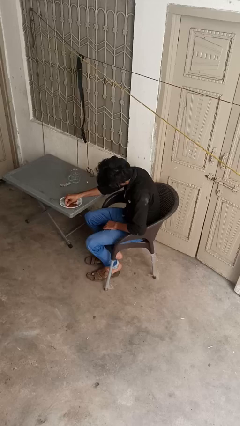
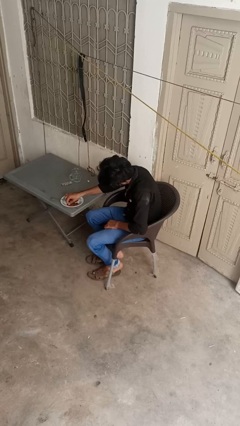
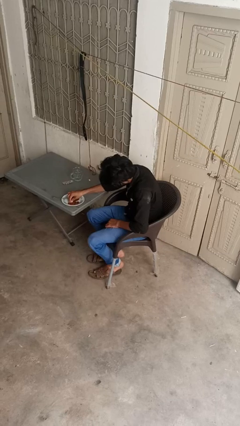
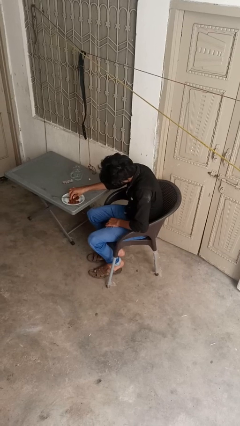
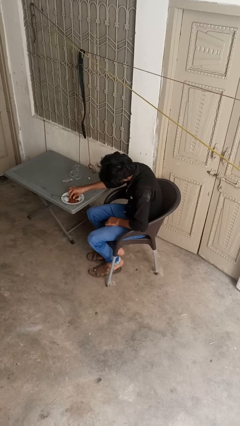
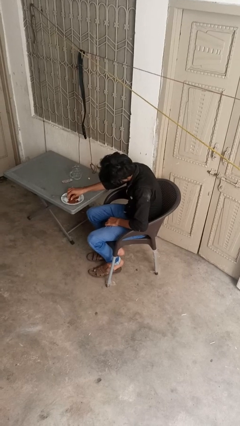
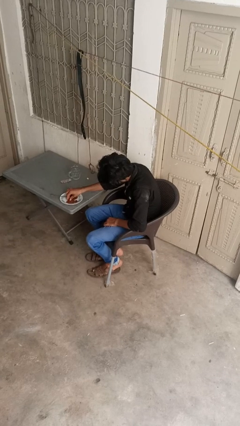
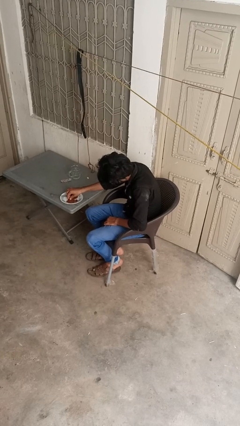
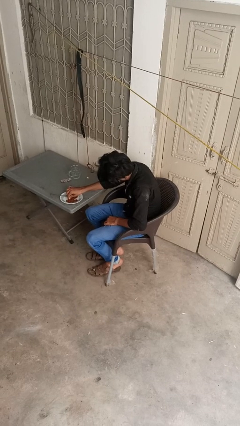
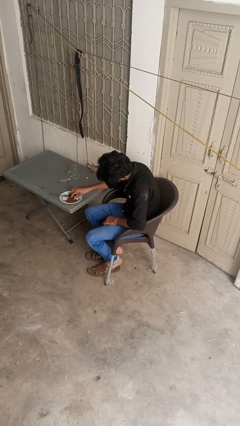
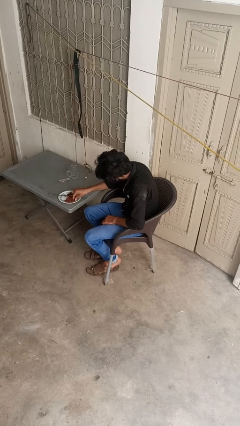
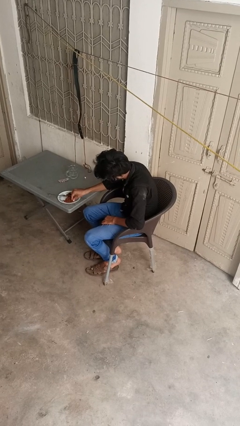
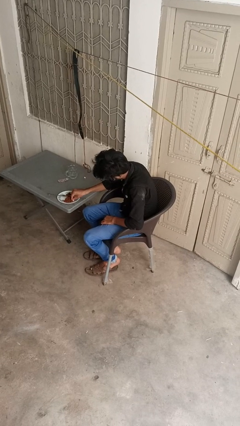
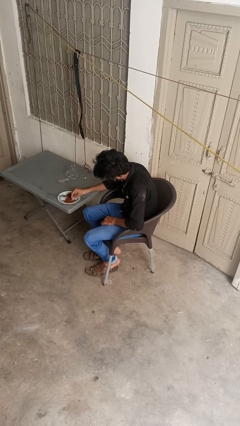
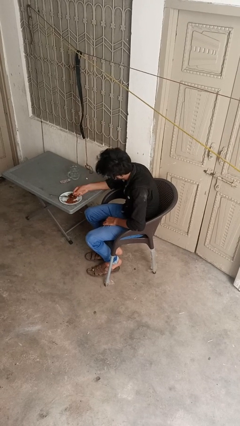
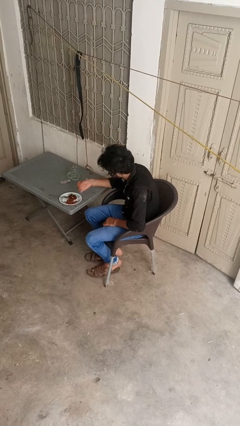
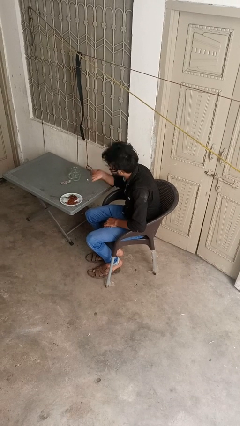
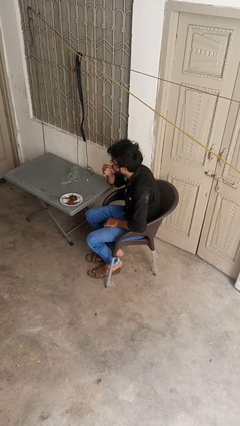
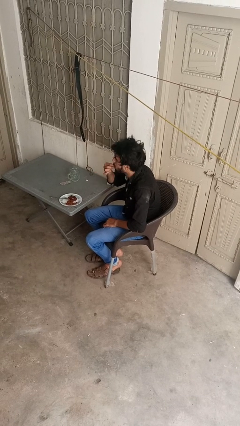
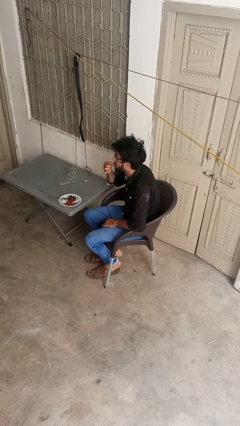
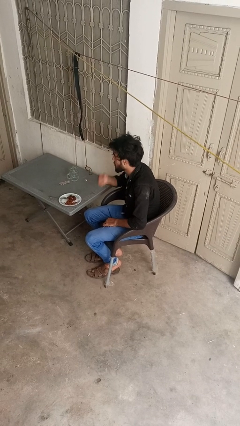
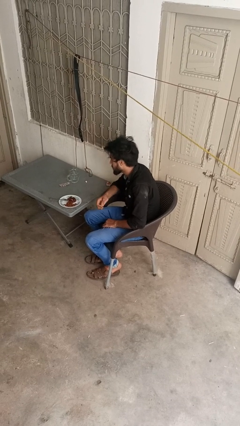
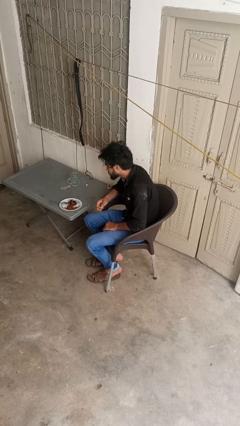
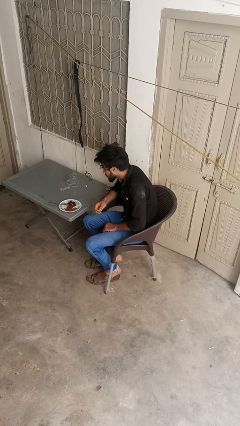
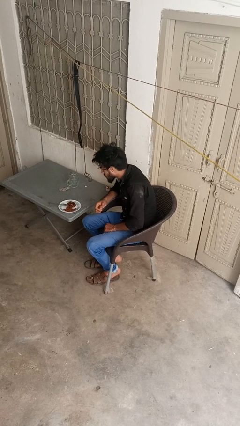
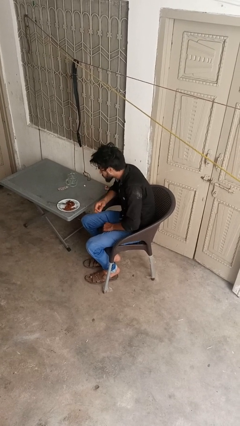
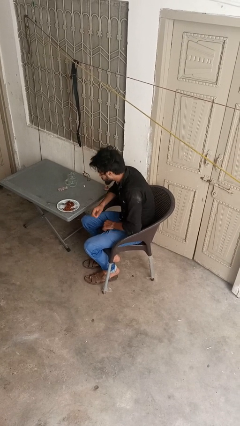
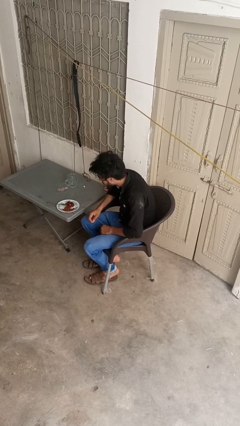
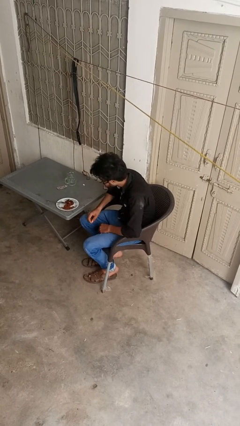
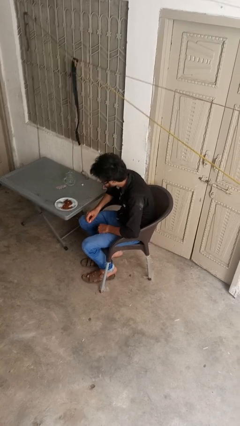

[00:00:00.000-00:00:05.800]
person eats with hands

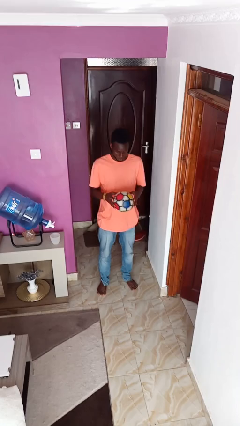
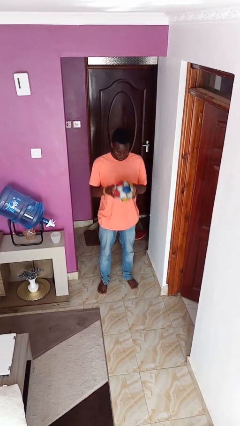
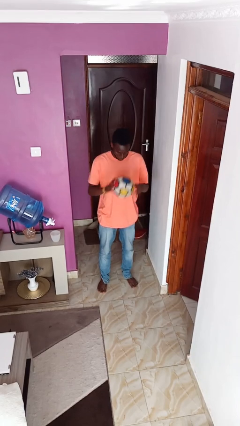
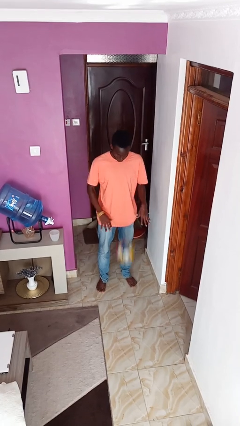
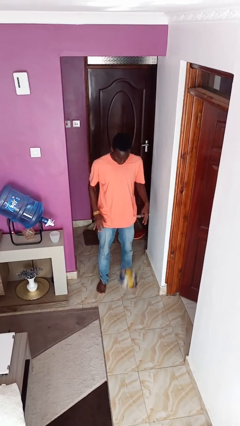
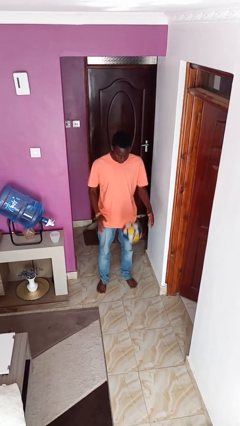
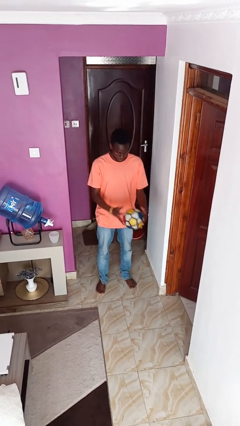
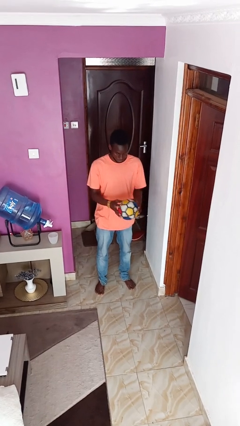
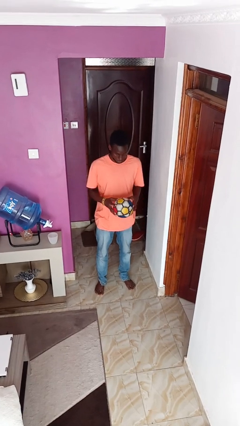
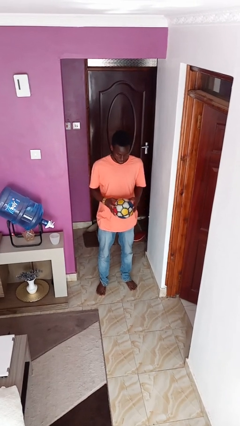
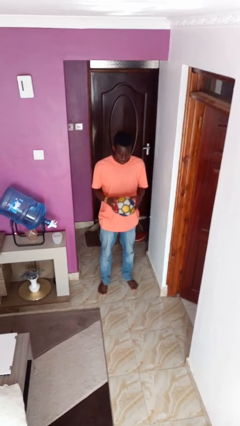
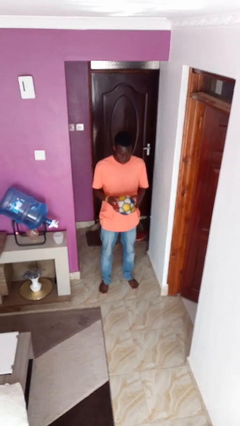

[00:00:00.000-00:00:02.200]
person bounces ball on floor

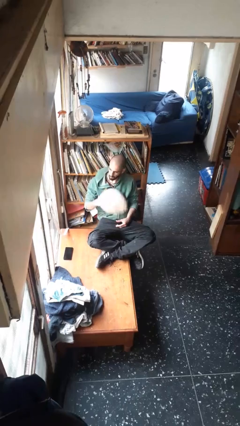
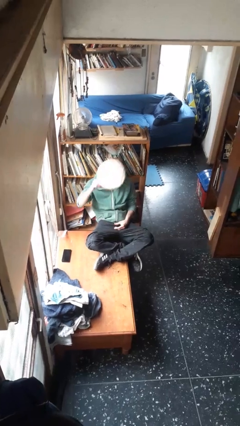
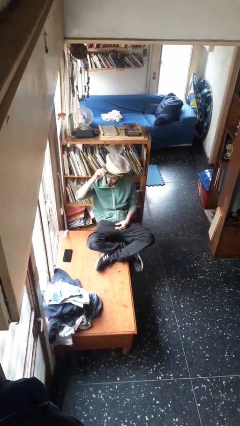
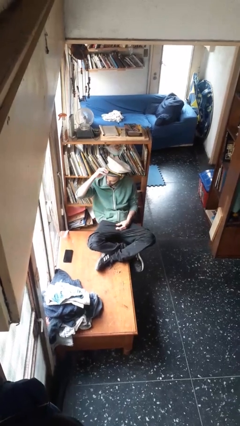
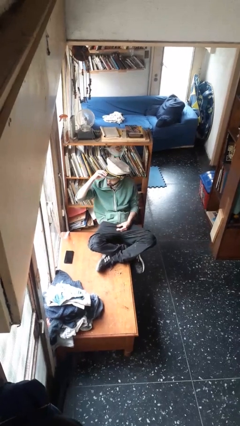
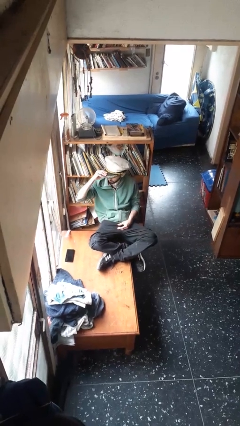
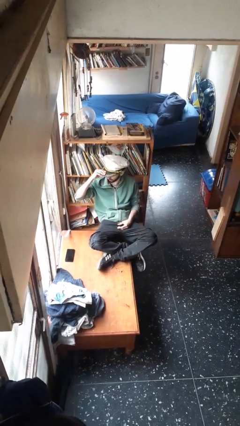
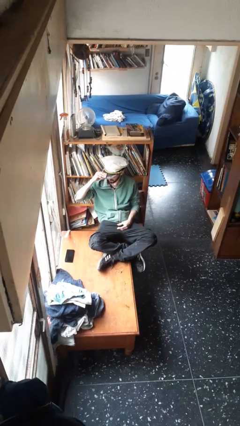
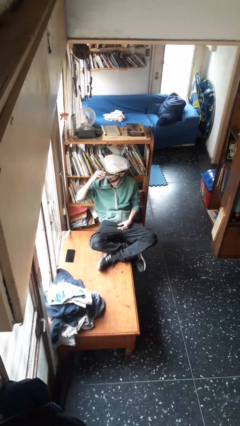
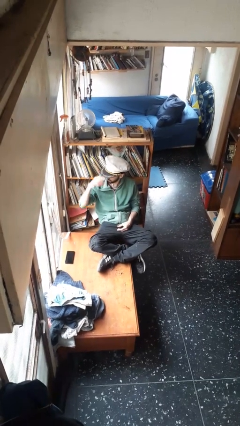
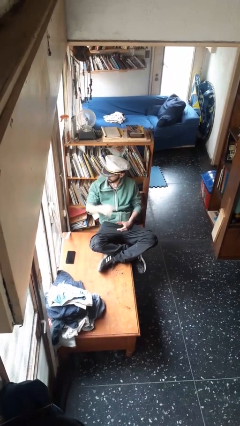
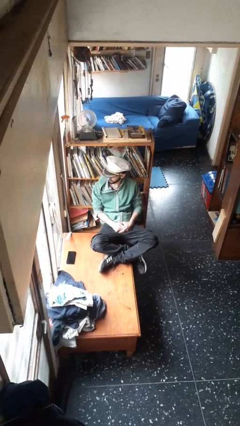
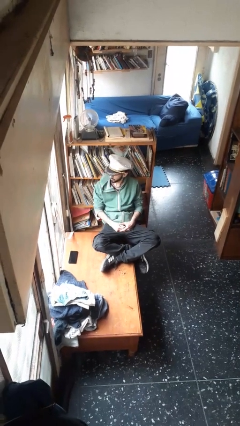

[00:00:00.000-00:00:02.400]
person puts on hat

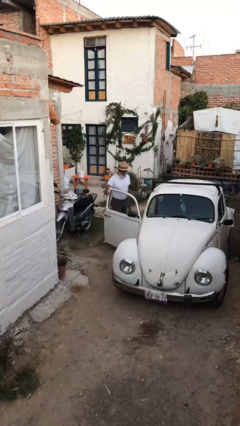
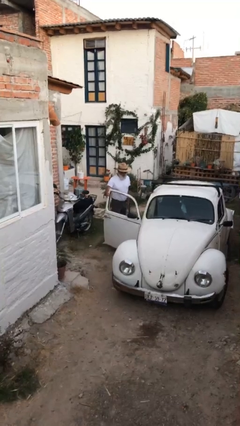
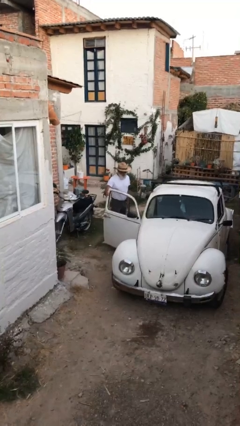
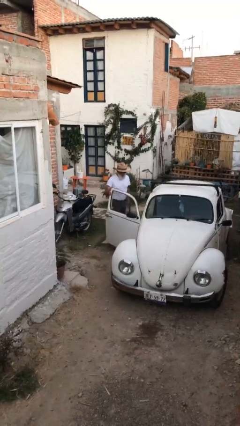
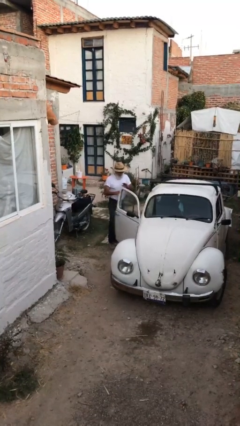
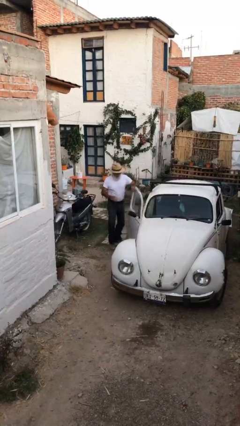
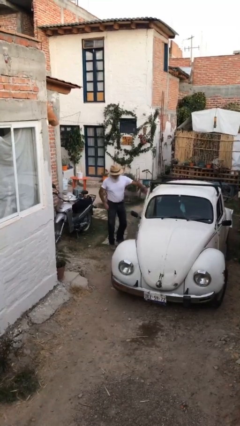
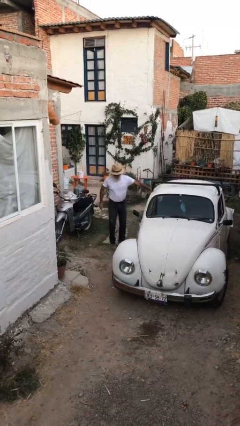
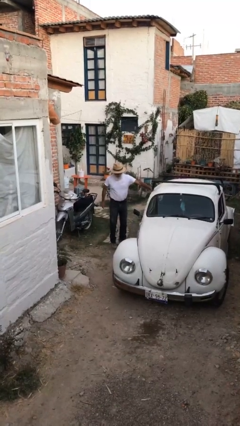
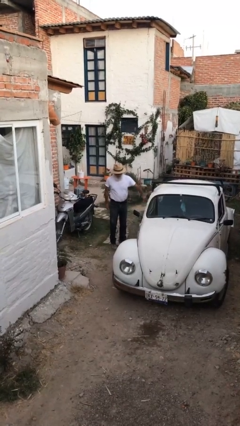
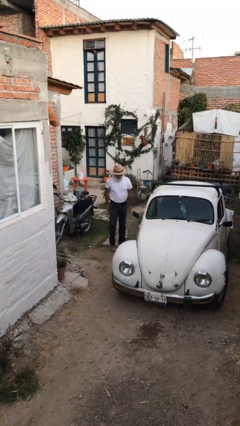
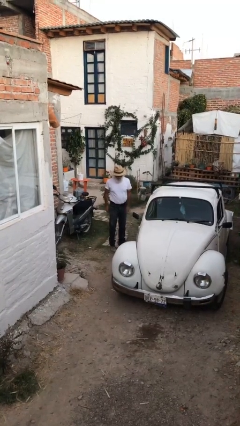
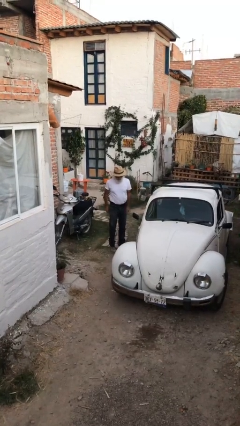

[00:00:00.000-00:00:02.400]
person closes car door

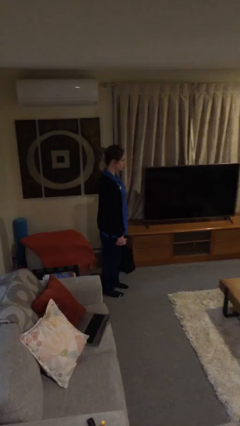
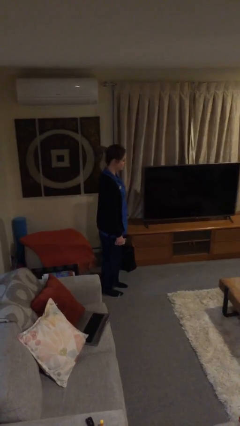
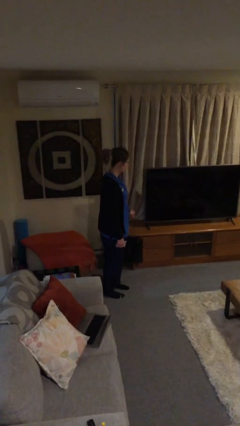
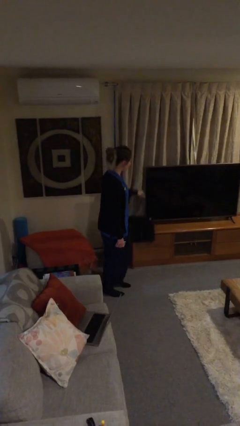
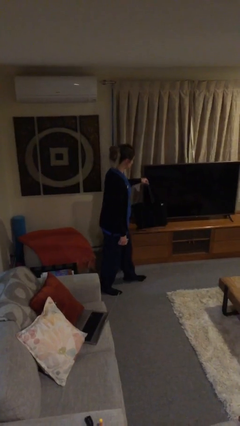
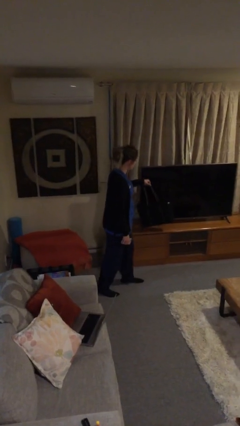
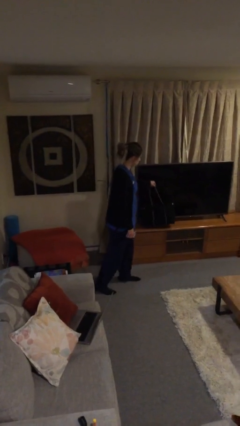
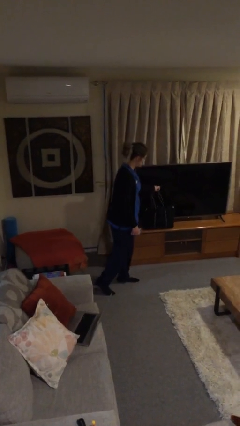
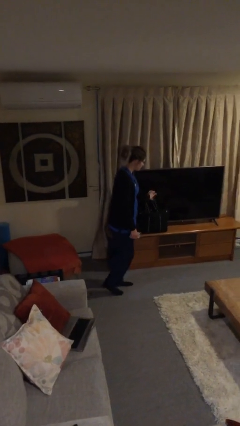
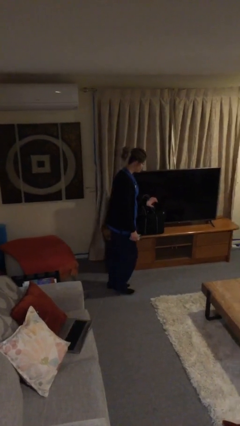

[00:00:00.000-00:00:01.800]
person puts down object on table

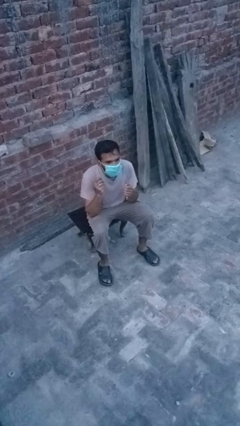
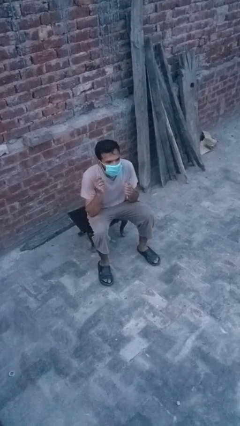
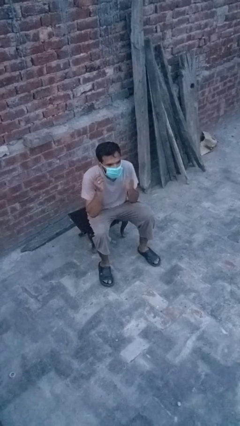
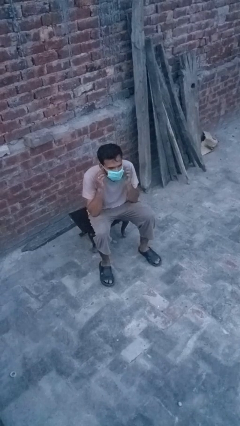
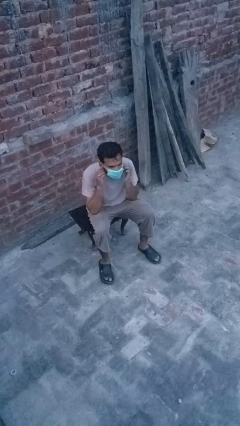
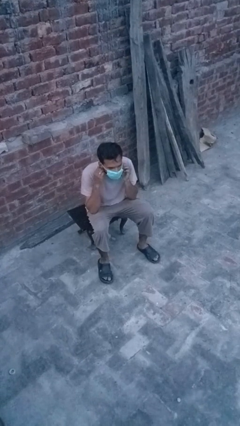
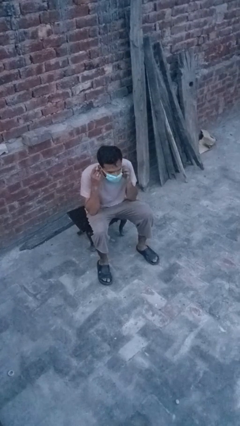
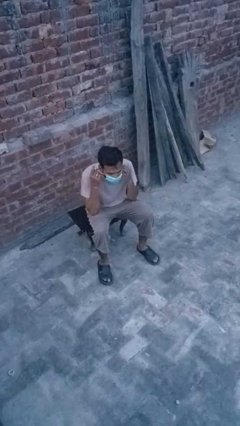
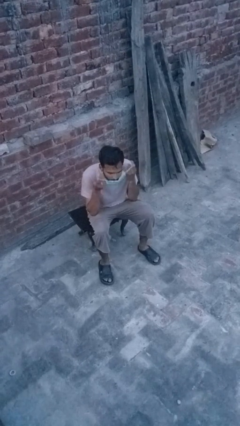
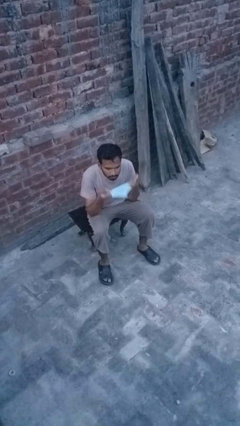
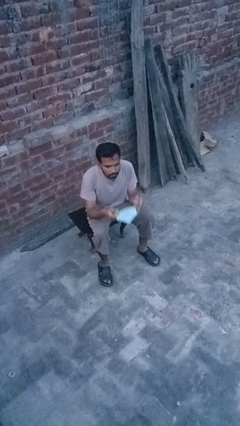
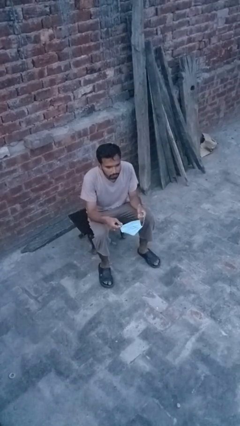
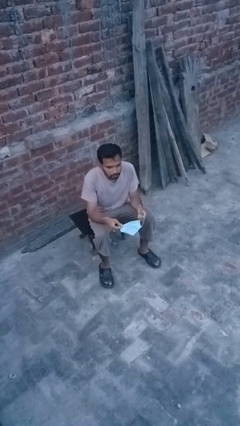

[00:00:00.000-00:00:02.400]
person takes off facemask

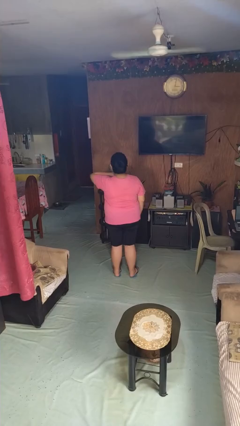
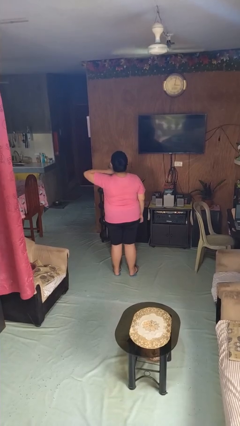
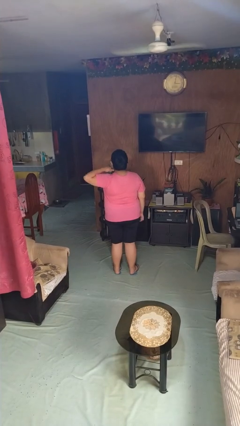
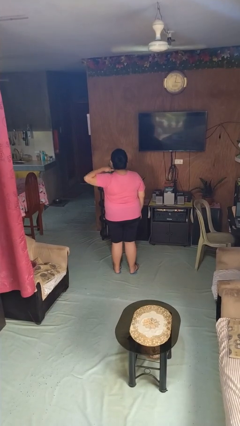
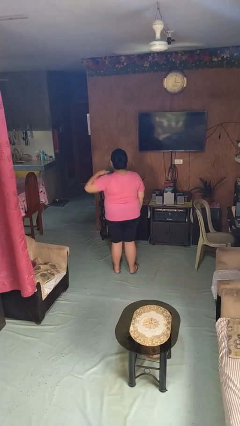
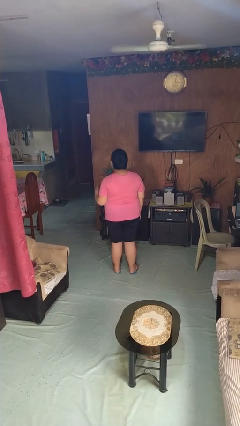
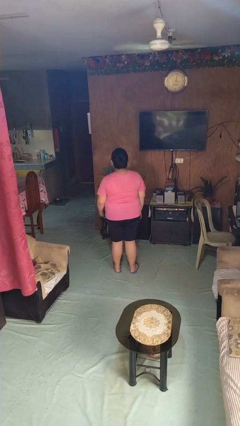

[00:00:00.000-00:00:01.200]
person gestures cut
